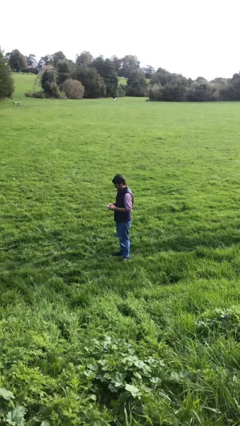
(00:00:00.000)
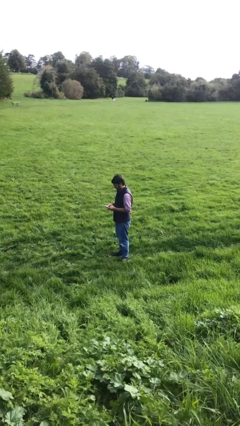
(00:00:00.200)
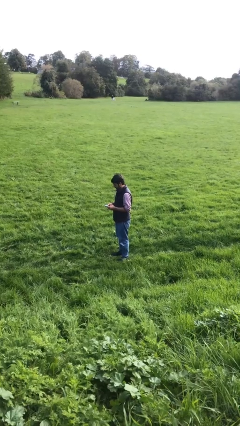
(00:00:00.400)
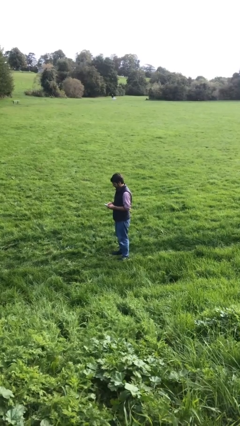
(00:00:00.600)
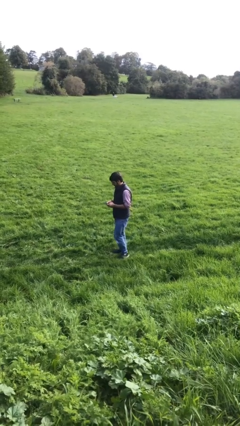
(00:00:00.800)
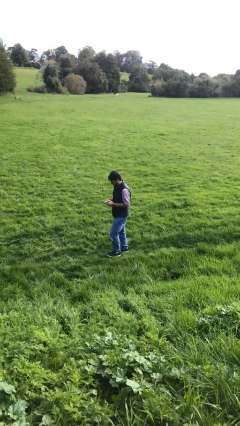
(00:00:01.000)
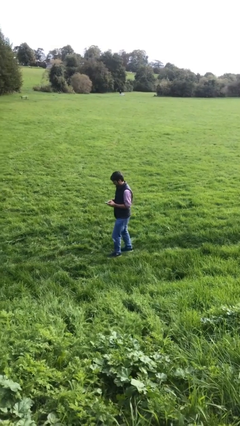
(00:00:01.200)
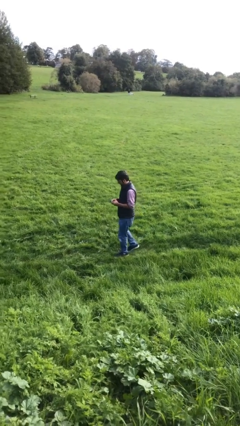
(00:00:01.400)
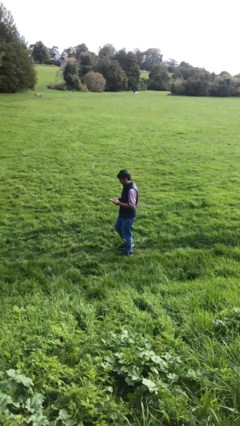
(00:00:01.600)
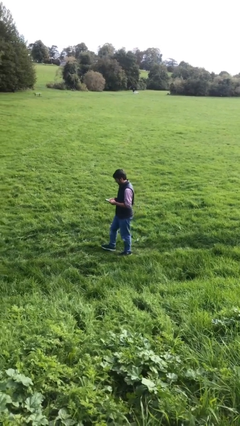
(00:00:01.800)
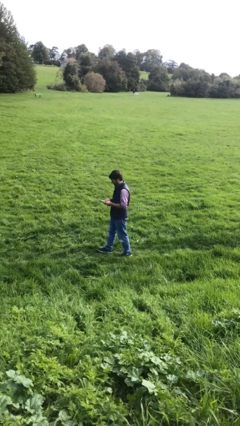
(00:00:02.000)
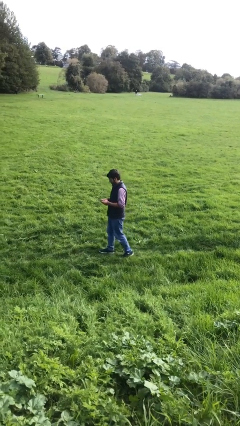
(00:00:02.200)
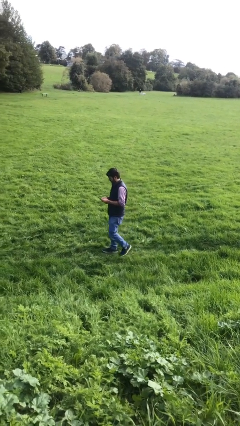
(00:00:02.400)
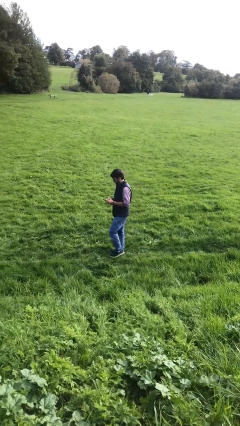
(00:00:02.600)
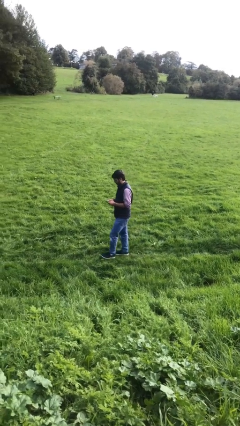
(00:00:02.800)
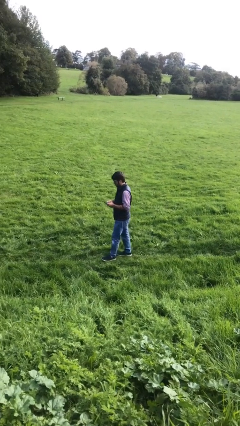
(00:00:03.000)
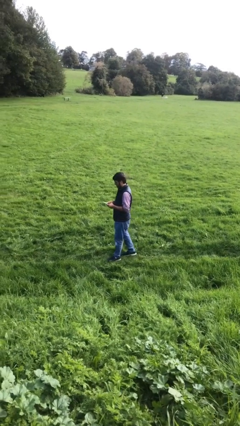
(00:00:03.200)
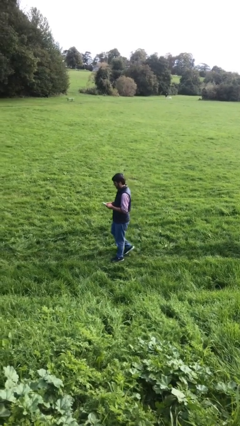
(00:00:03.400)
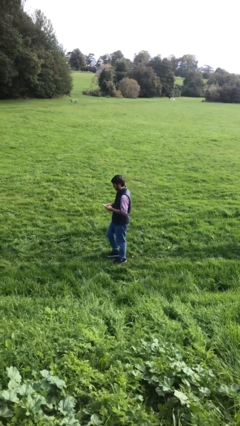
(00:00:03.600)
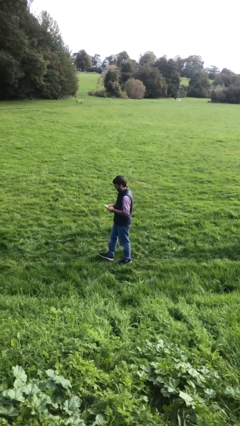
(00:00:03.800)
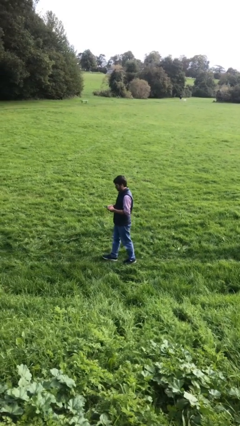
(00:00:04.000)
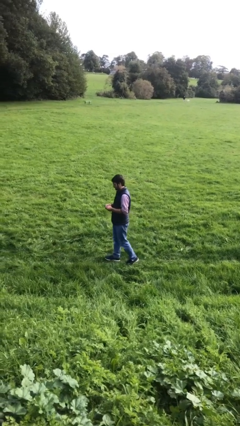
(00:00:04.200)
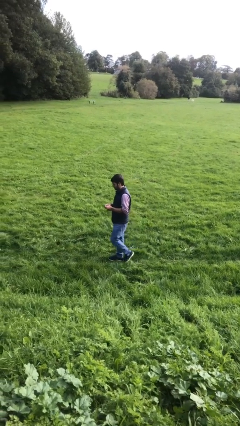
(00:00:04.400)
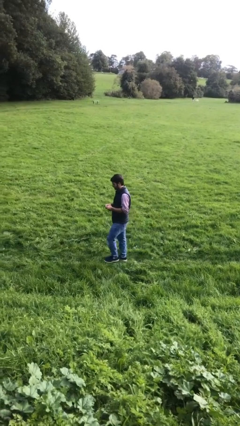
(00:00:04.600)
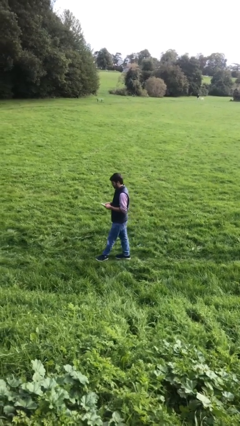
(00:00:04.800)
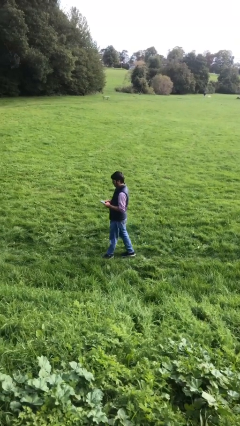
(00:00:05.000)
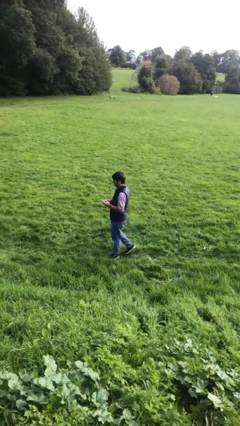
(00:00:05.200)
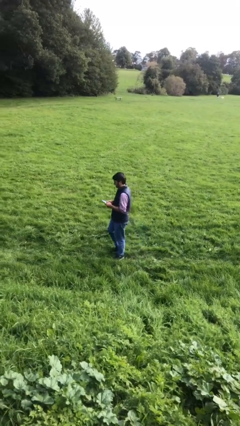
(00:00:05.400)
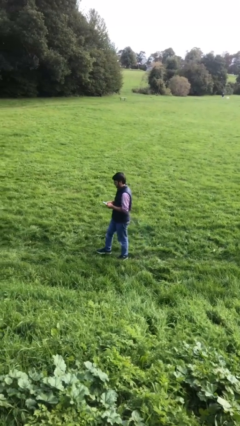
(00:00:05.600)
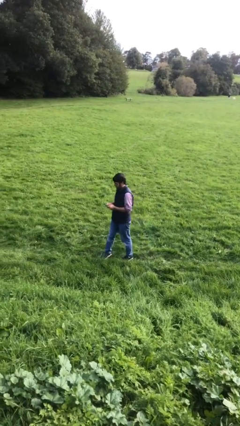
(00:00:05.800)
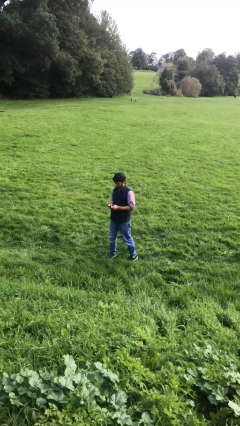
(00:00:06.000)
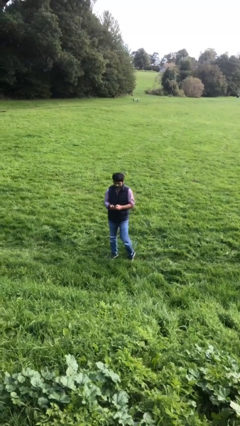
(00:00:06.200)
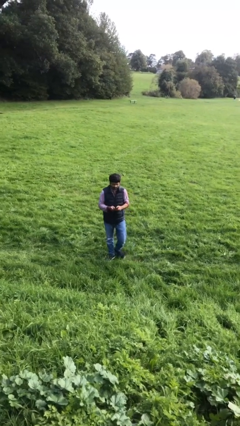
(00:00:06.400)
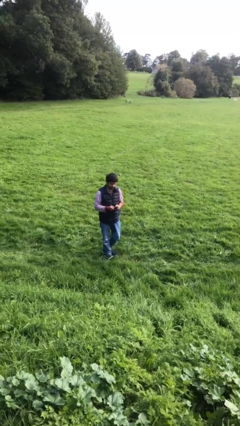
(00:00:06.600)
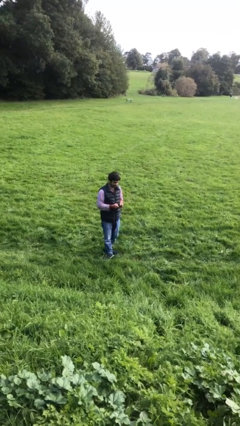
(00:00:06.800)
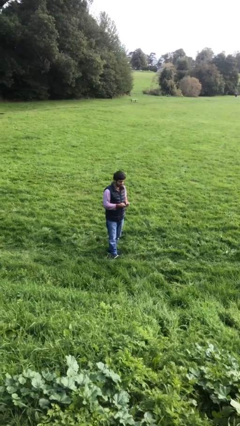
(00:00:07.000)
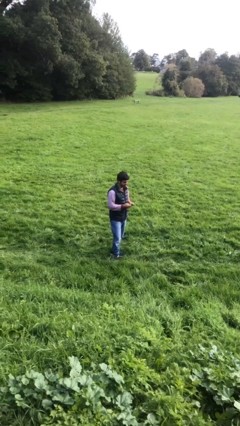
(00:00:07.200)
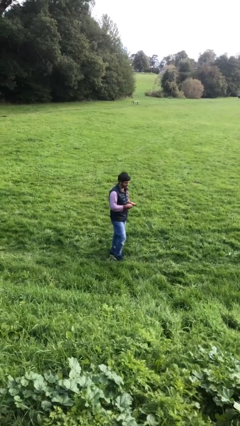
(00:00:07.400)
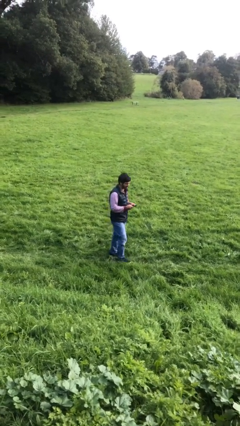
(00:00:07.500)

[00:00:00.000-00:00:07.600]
person texts on phone

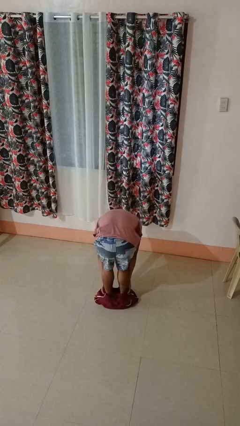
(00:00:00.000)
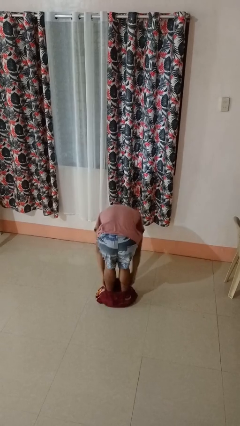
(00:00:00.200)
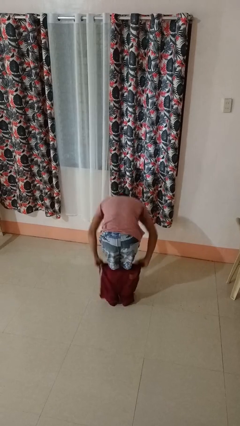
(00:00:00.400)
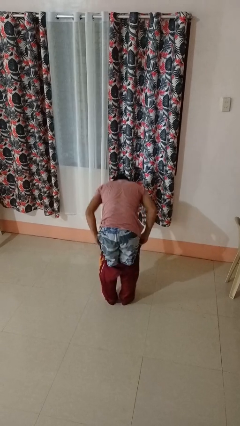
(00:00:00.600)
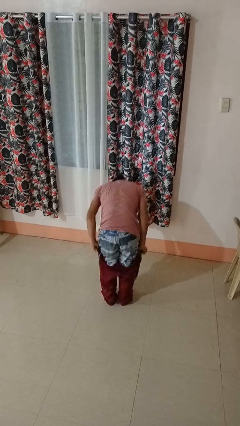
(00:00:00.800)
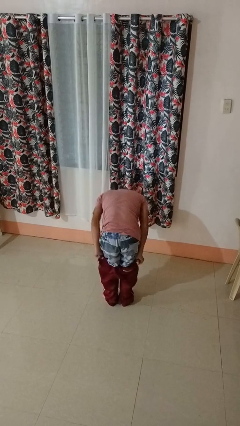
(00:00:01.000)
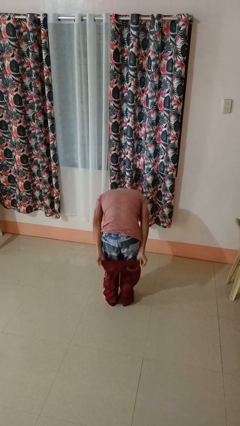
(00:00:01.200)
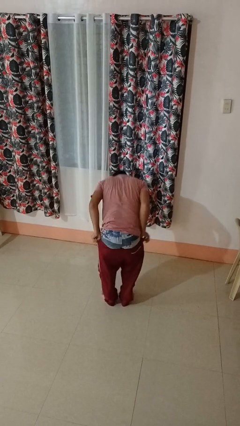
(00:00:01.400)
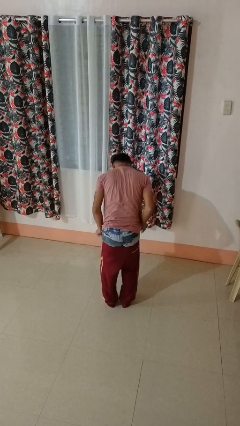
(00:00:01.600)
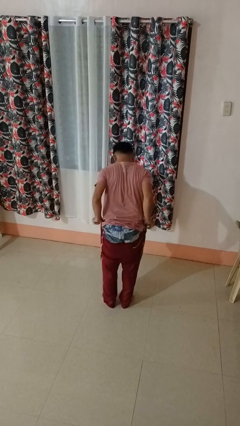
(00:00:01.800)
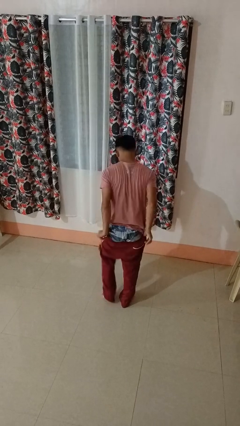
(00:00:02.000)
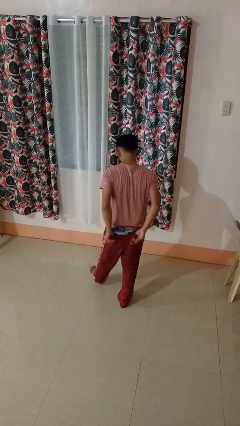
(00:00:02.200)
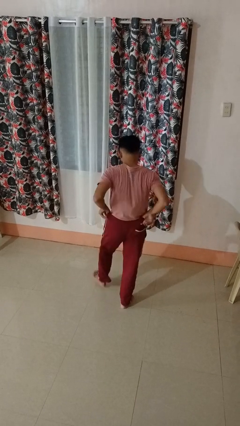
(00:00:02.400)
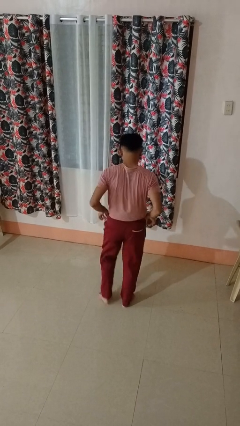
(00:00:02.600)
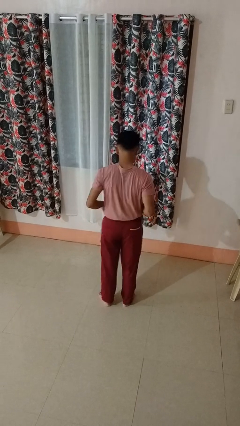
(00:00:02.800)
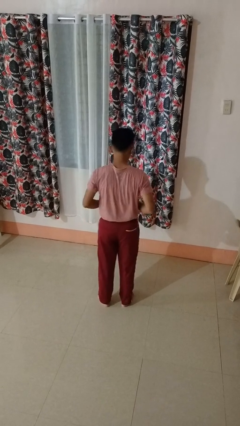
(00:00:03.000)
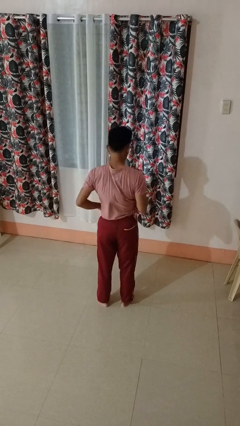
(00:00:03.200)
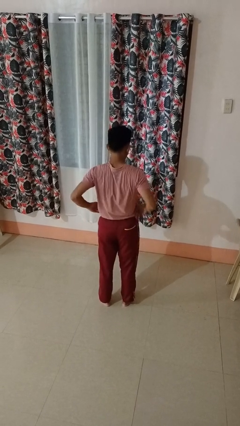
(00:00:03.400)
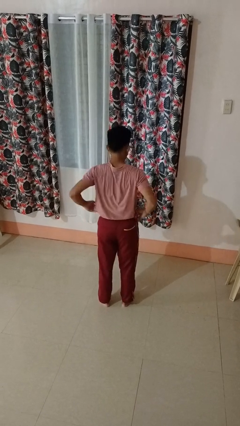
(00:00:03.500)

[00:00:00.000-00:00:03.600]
person puts on pants

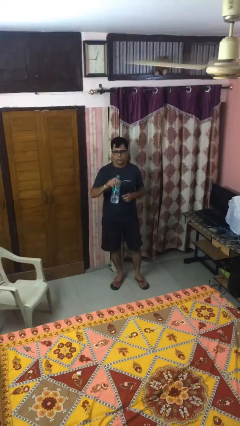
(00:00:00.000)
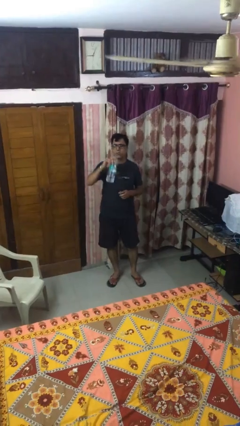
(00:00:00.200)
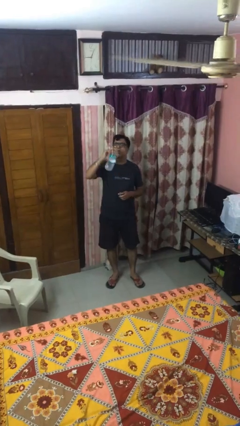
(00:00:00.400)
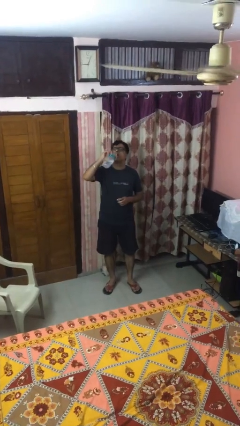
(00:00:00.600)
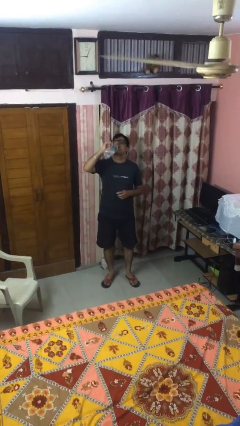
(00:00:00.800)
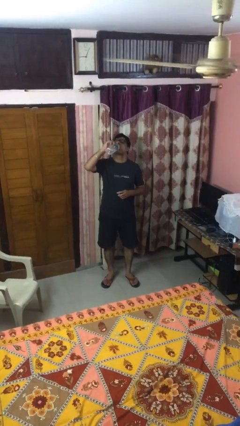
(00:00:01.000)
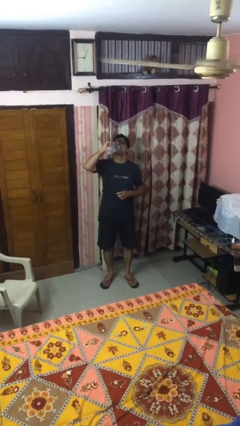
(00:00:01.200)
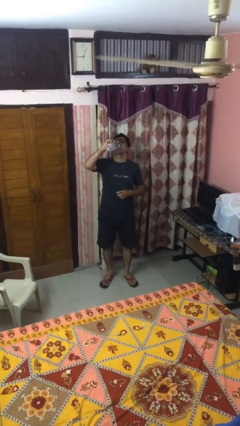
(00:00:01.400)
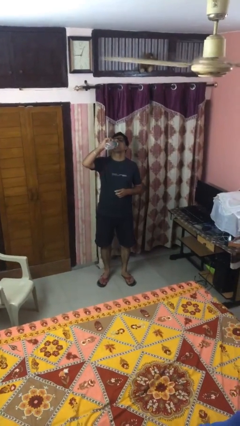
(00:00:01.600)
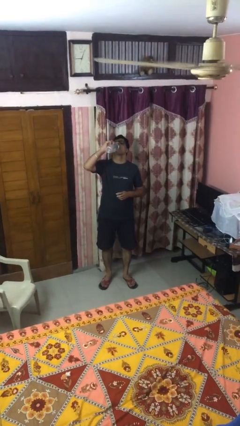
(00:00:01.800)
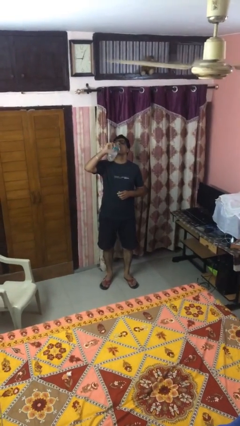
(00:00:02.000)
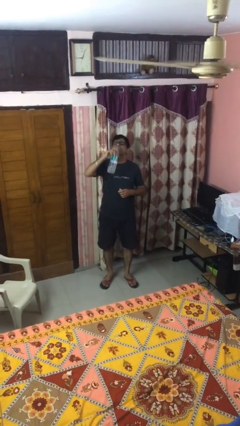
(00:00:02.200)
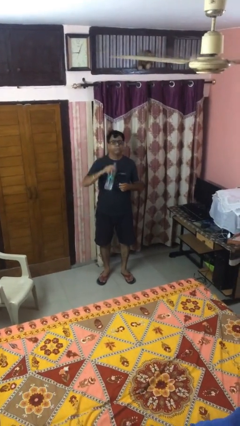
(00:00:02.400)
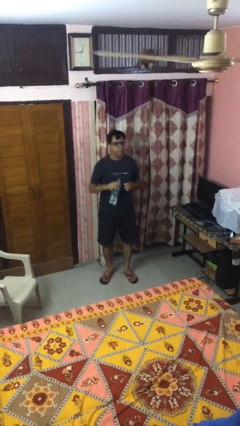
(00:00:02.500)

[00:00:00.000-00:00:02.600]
person drinks from bottle

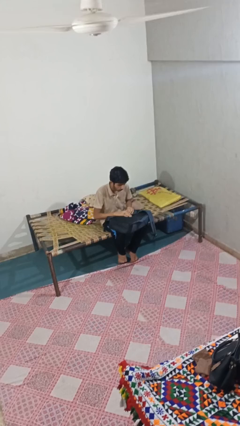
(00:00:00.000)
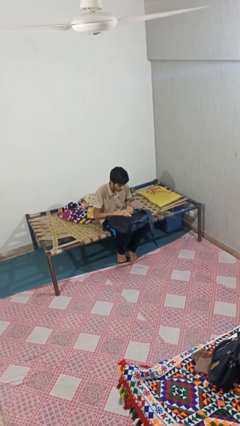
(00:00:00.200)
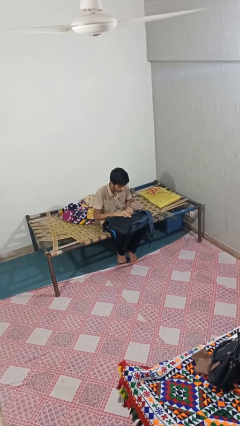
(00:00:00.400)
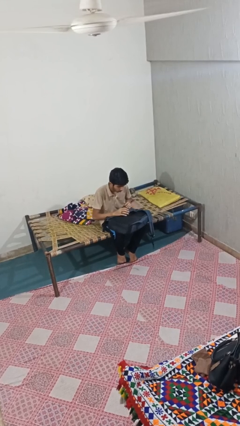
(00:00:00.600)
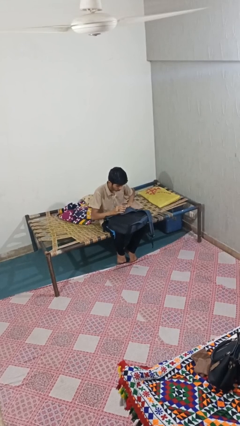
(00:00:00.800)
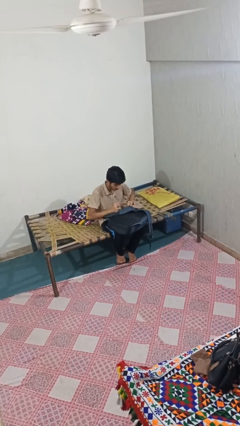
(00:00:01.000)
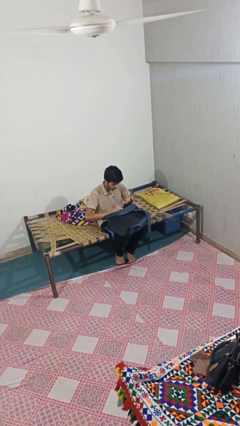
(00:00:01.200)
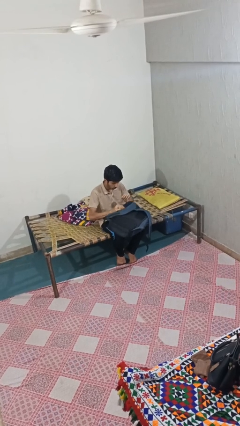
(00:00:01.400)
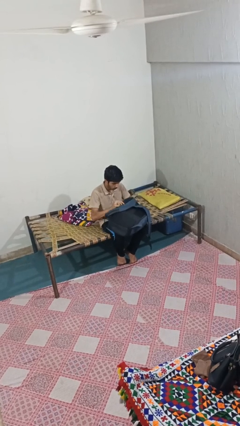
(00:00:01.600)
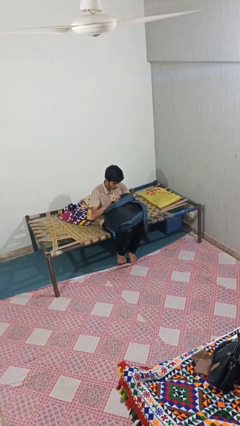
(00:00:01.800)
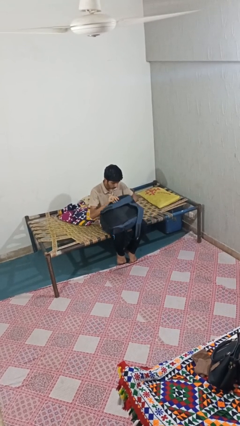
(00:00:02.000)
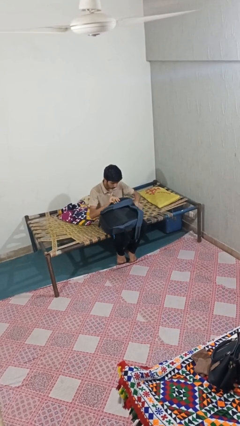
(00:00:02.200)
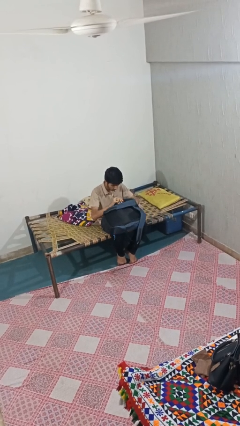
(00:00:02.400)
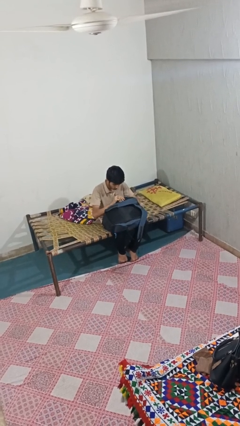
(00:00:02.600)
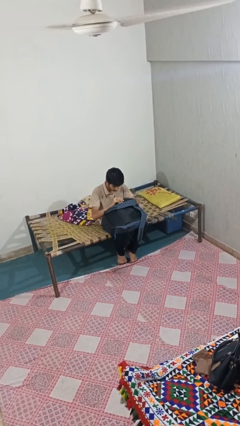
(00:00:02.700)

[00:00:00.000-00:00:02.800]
person searches in backpack

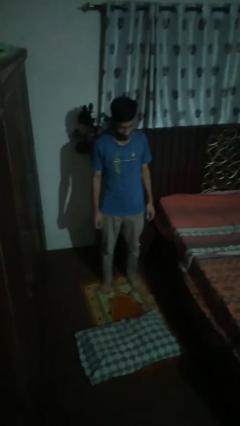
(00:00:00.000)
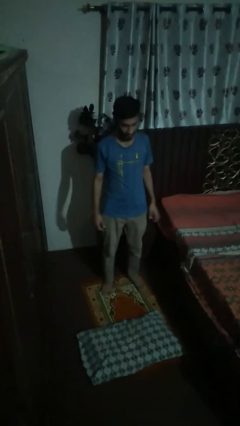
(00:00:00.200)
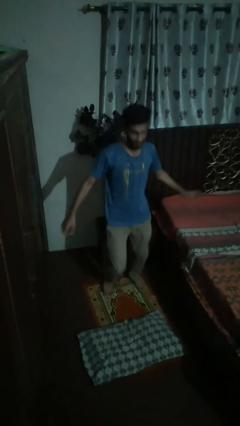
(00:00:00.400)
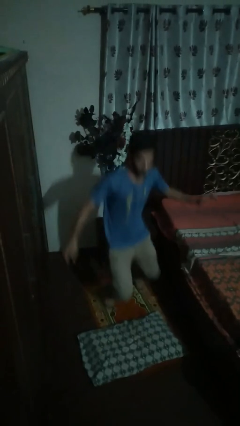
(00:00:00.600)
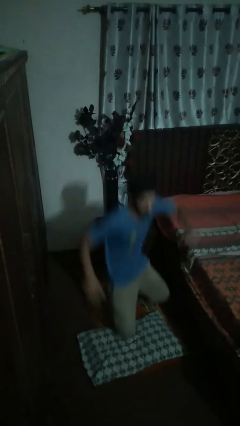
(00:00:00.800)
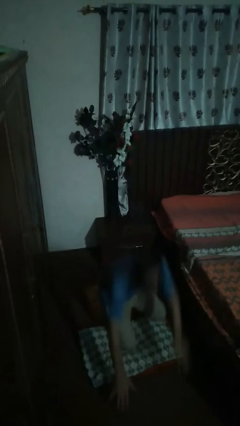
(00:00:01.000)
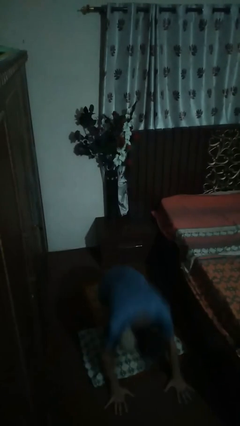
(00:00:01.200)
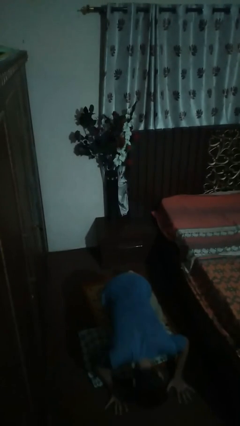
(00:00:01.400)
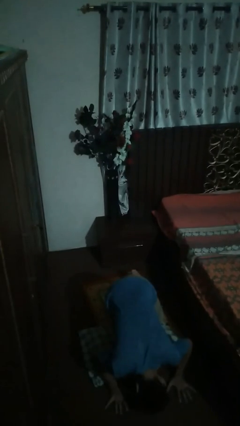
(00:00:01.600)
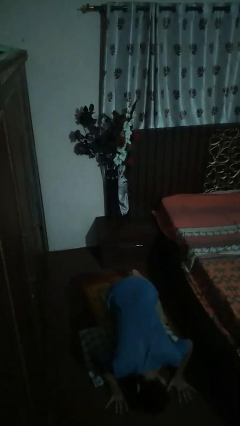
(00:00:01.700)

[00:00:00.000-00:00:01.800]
person trips on object on floor